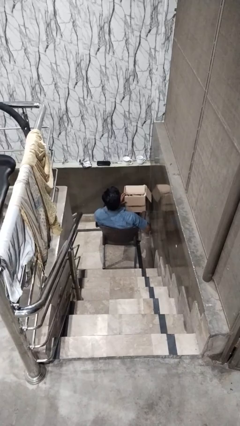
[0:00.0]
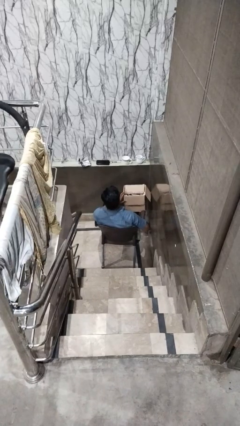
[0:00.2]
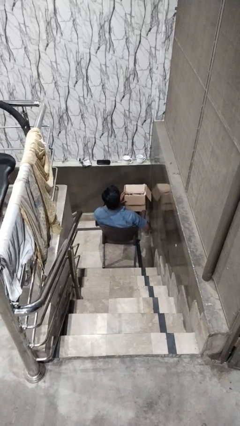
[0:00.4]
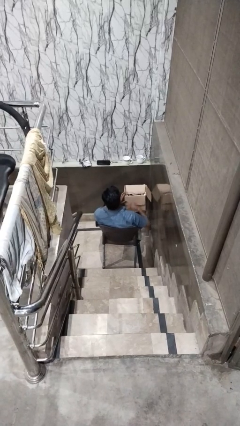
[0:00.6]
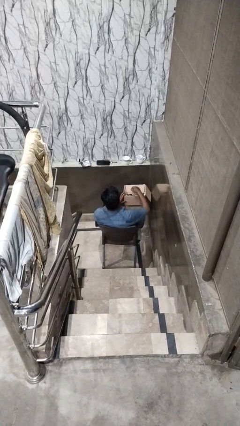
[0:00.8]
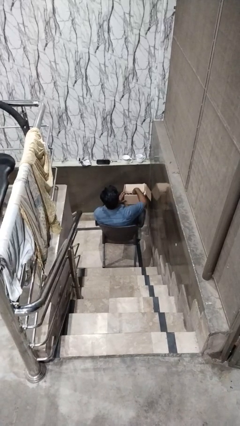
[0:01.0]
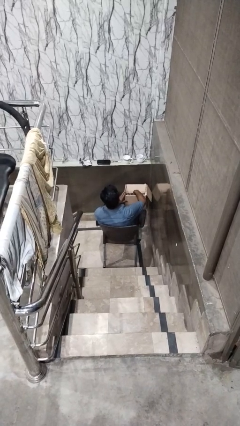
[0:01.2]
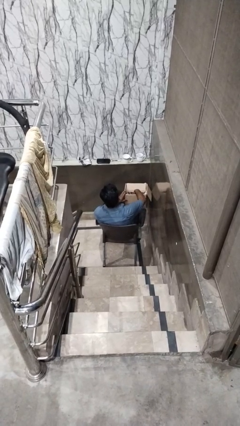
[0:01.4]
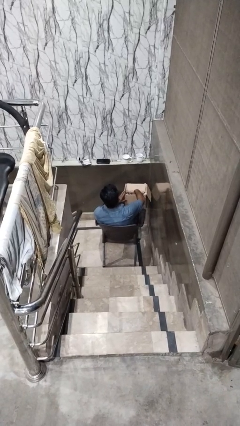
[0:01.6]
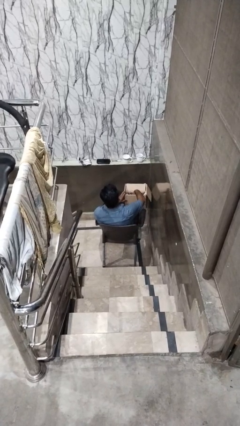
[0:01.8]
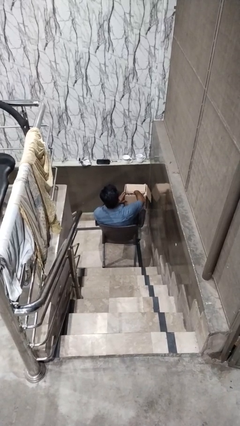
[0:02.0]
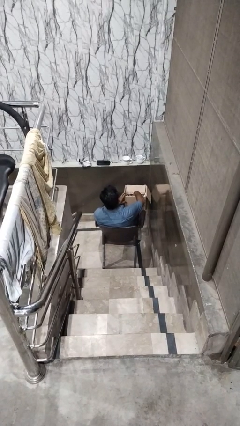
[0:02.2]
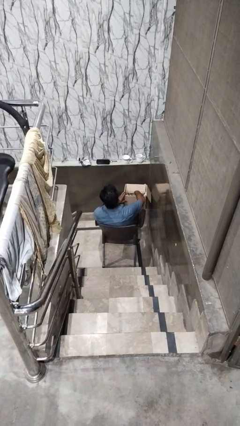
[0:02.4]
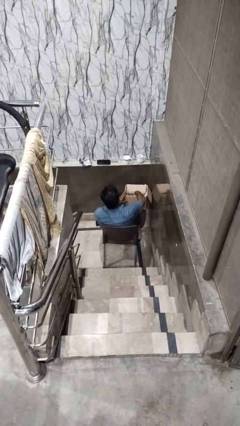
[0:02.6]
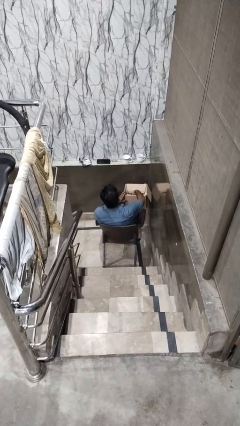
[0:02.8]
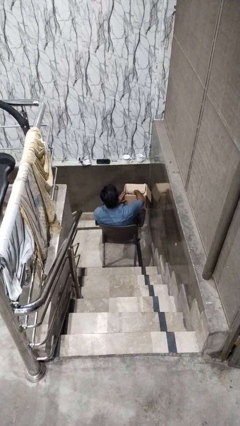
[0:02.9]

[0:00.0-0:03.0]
person searches in box

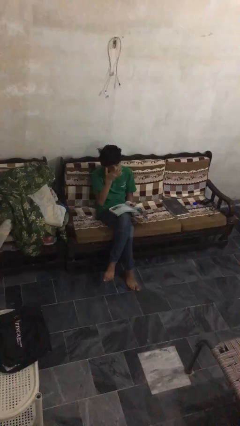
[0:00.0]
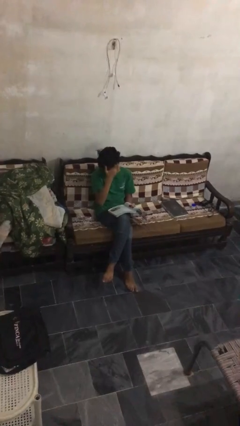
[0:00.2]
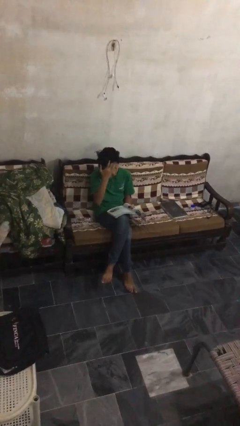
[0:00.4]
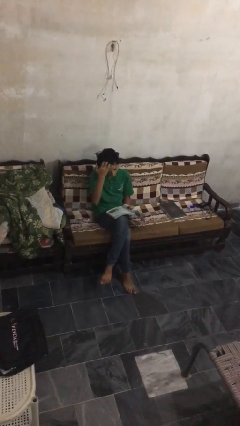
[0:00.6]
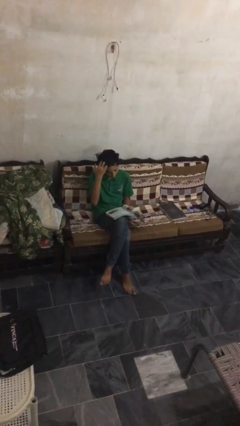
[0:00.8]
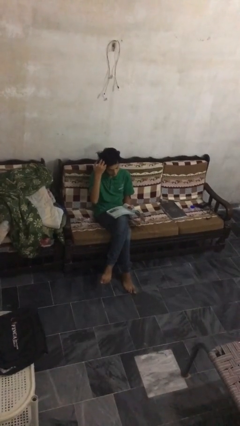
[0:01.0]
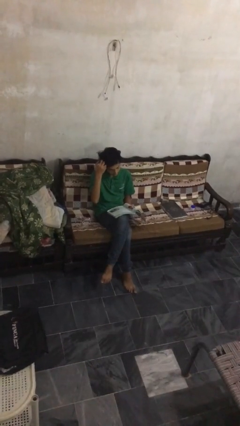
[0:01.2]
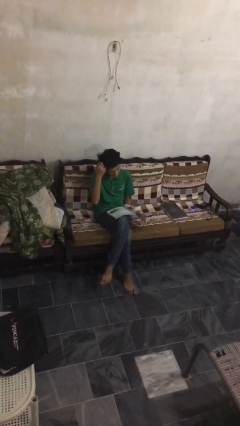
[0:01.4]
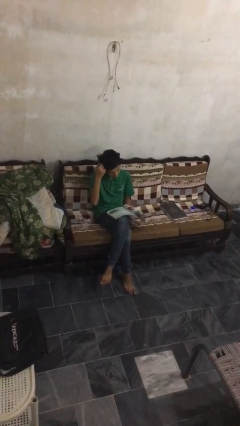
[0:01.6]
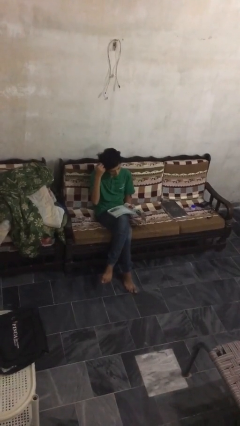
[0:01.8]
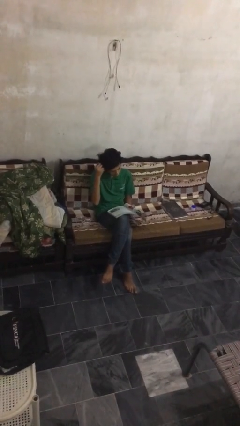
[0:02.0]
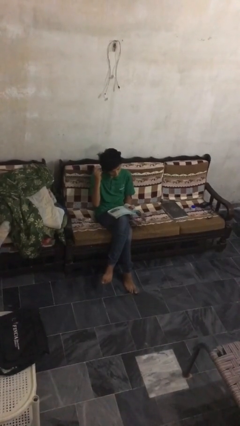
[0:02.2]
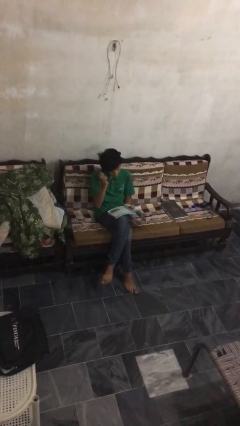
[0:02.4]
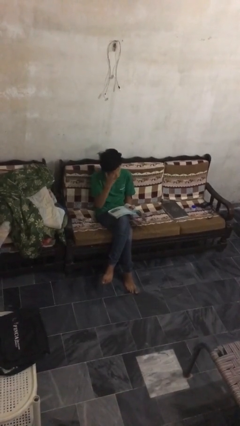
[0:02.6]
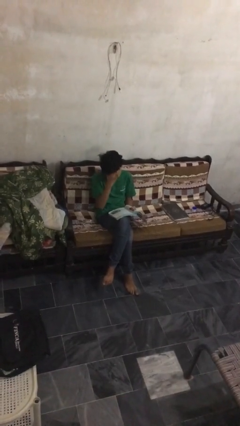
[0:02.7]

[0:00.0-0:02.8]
person reads document

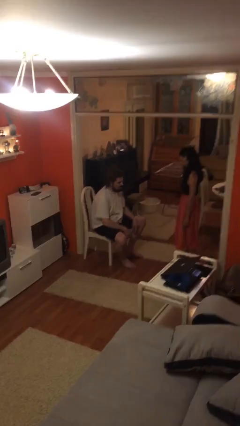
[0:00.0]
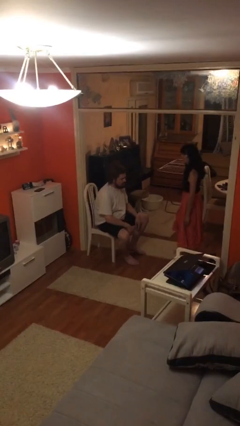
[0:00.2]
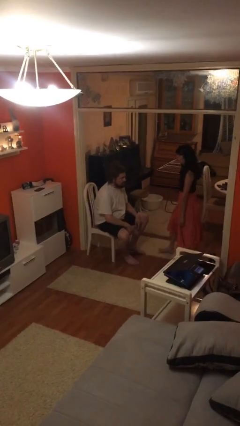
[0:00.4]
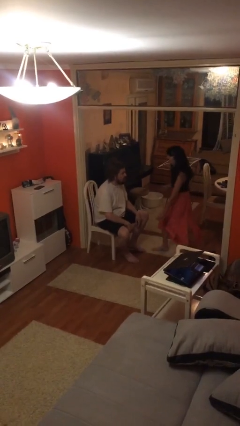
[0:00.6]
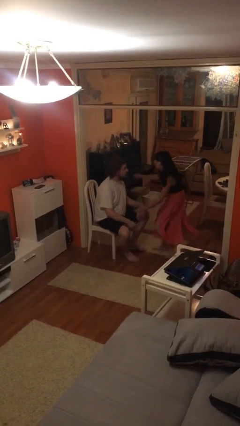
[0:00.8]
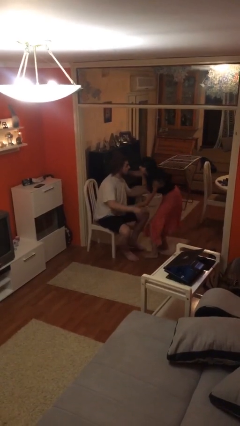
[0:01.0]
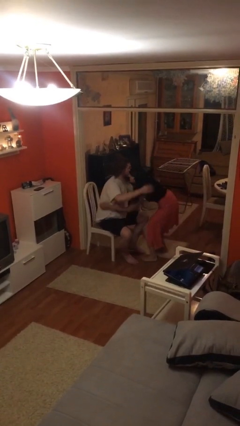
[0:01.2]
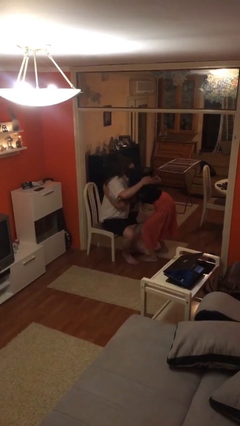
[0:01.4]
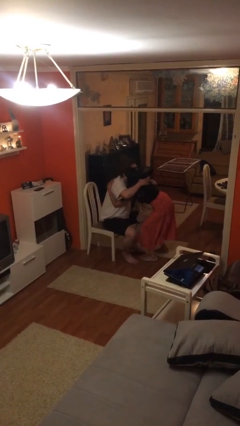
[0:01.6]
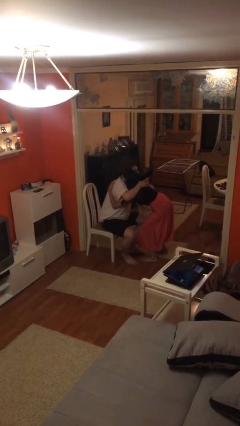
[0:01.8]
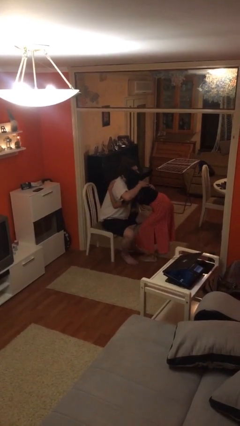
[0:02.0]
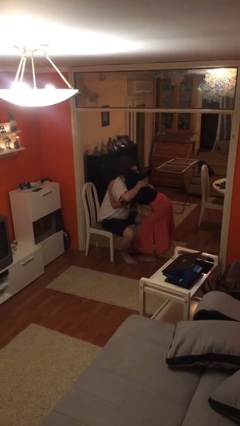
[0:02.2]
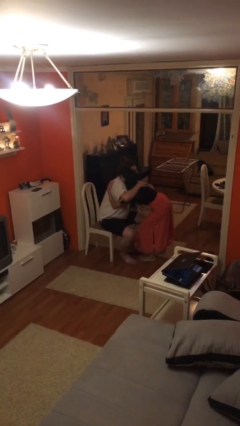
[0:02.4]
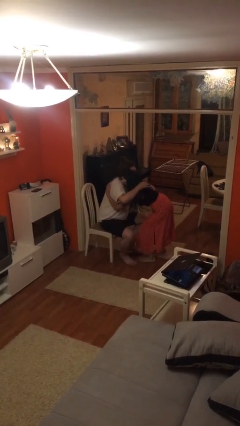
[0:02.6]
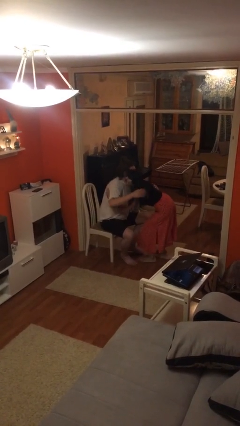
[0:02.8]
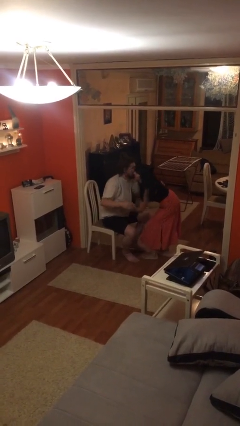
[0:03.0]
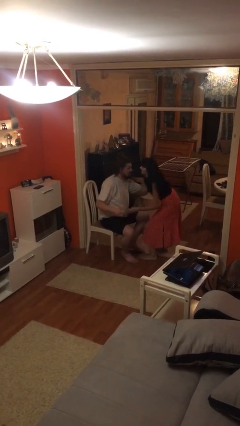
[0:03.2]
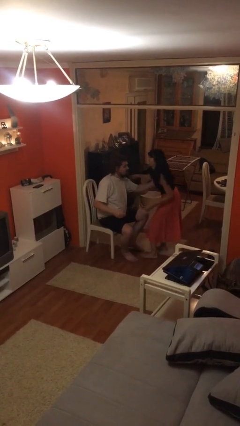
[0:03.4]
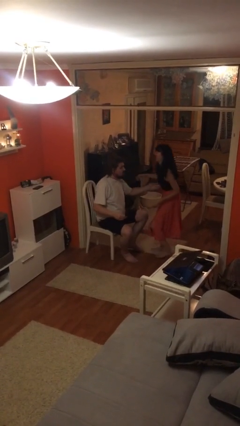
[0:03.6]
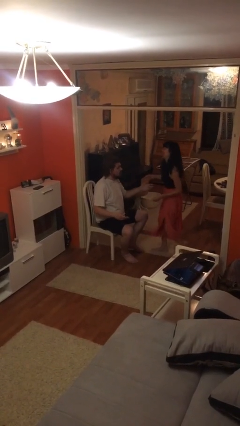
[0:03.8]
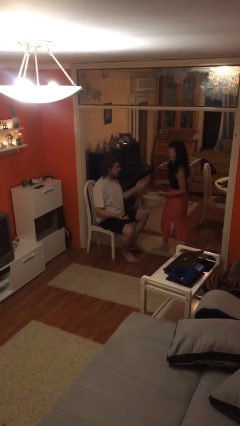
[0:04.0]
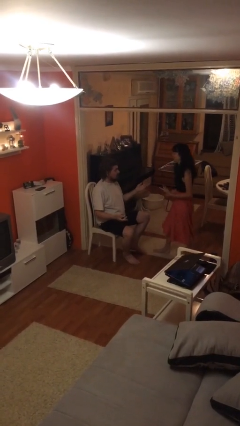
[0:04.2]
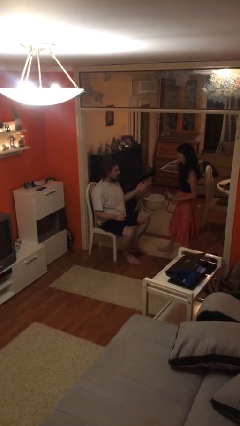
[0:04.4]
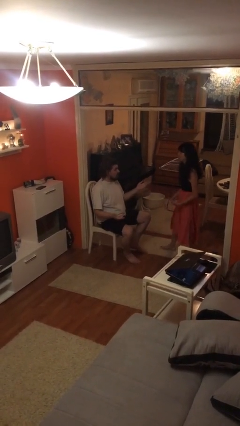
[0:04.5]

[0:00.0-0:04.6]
person embraces person

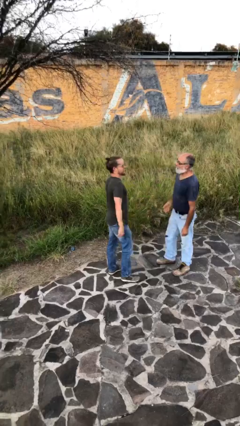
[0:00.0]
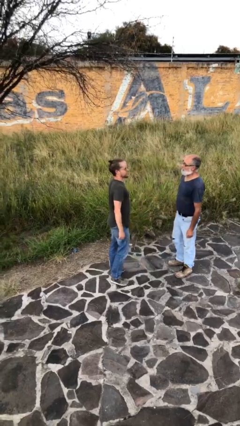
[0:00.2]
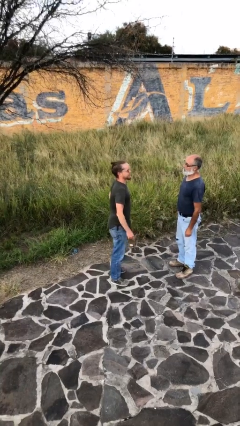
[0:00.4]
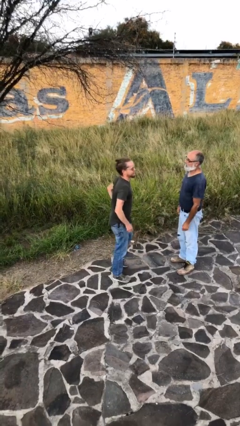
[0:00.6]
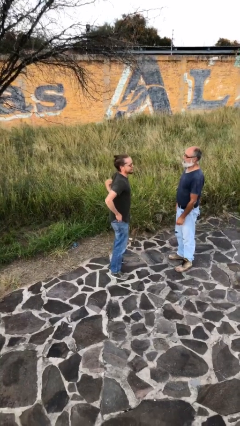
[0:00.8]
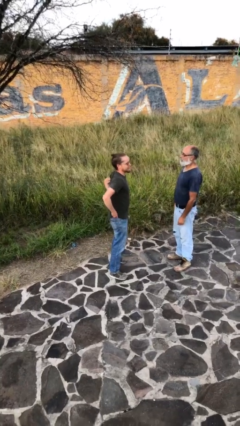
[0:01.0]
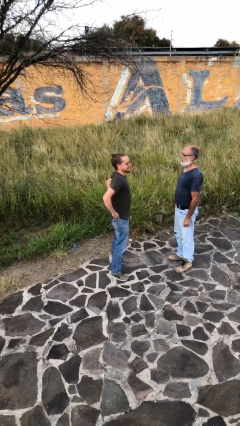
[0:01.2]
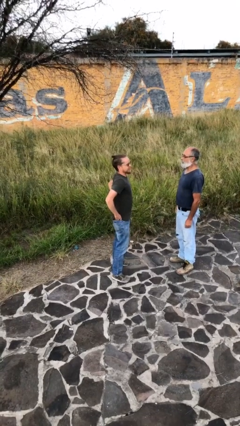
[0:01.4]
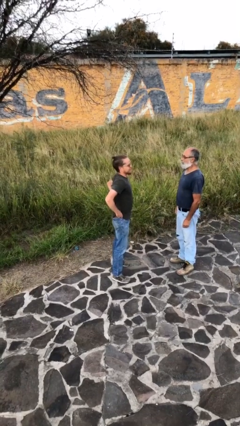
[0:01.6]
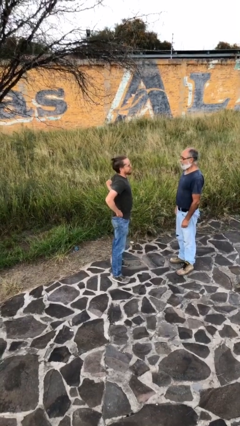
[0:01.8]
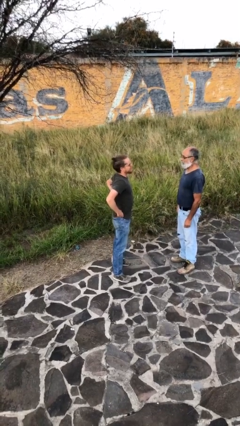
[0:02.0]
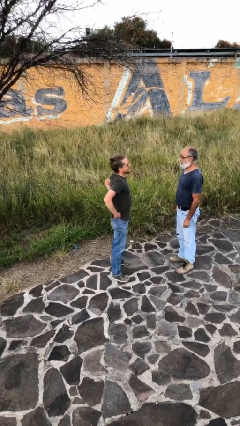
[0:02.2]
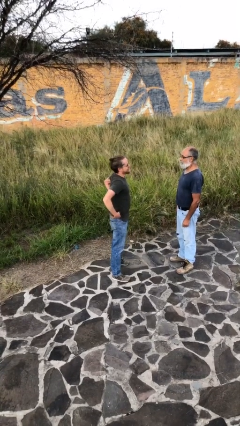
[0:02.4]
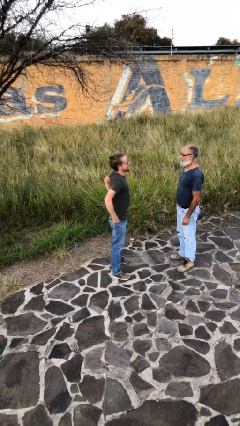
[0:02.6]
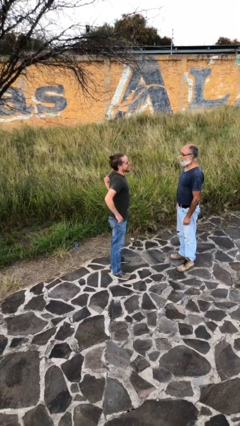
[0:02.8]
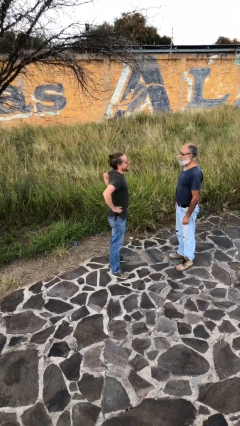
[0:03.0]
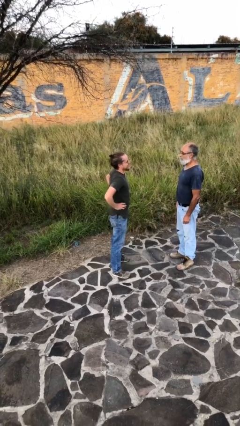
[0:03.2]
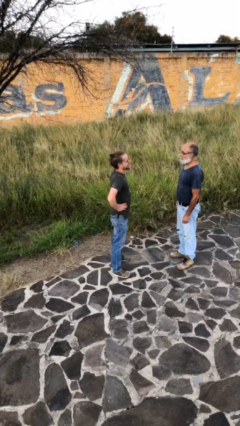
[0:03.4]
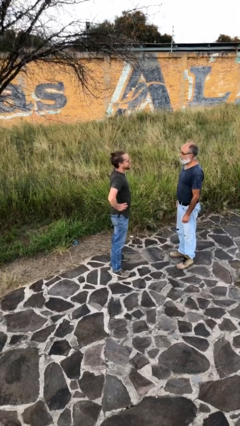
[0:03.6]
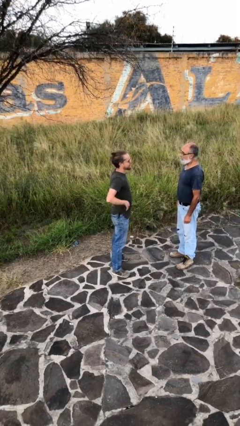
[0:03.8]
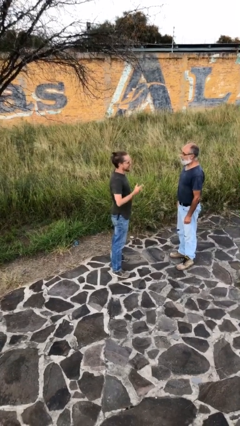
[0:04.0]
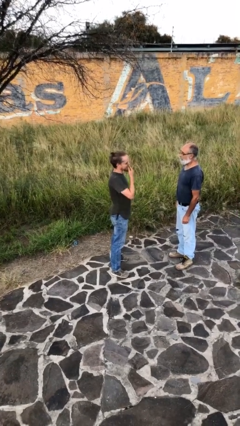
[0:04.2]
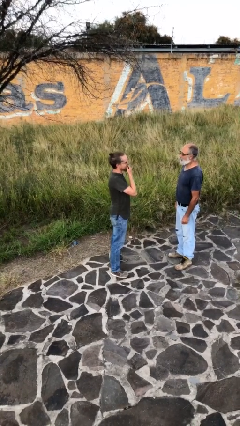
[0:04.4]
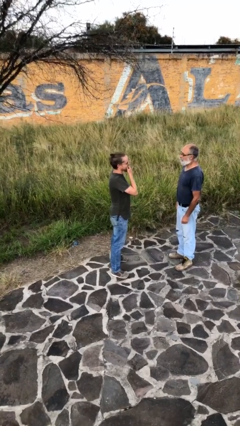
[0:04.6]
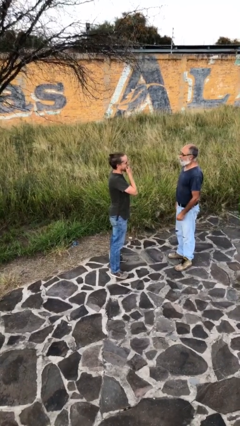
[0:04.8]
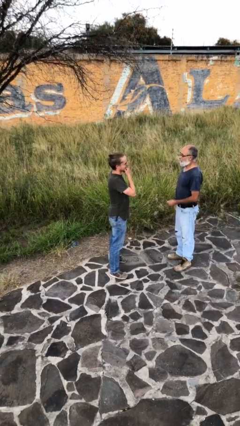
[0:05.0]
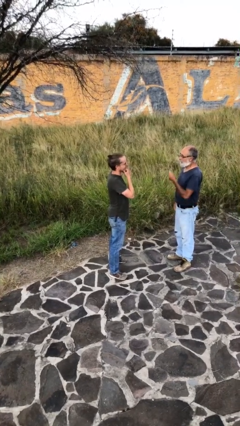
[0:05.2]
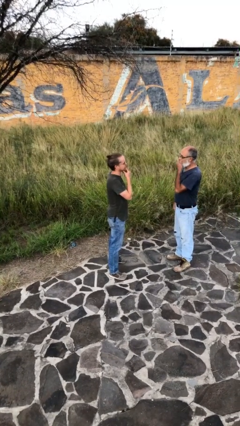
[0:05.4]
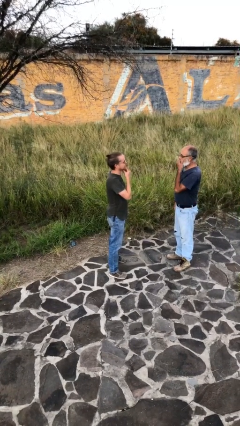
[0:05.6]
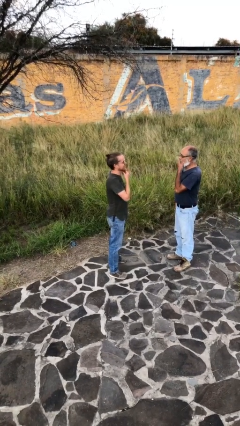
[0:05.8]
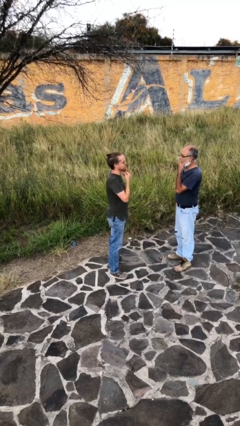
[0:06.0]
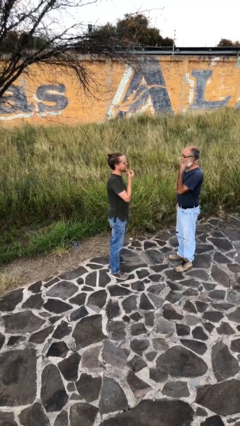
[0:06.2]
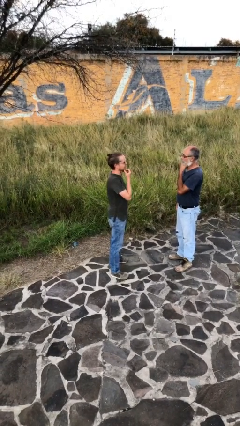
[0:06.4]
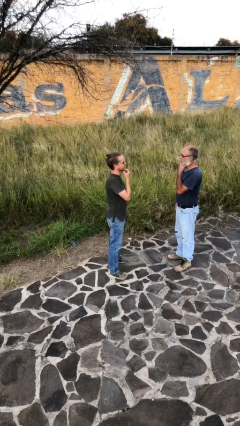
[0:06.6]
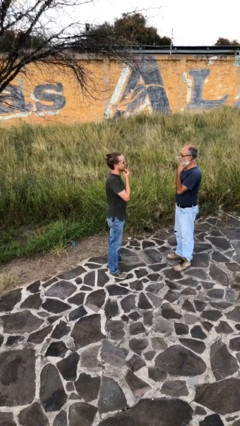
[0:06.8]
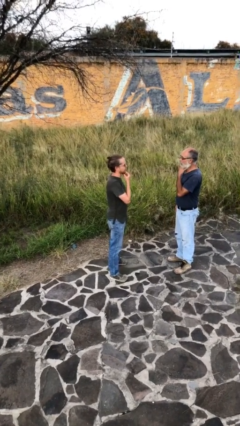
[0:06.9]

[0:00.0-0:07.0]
person talks to person

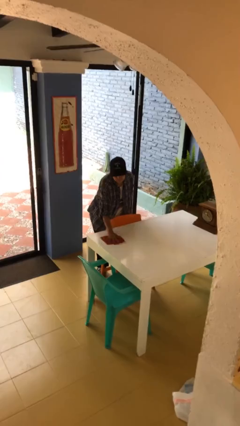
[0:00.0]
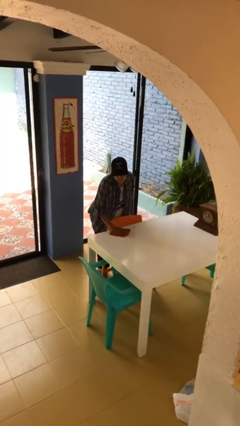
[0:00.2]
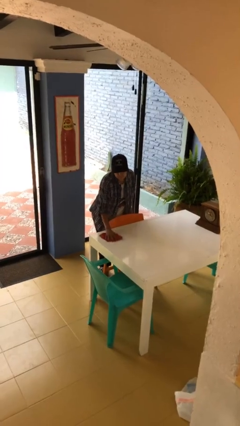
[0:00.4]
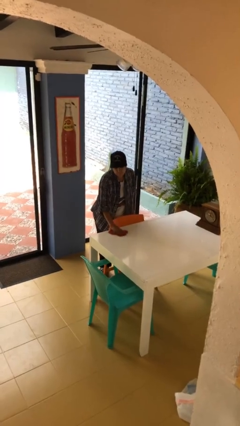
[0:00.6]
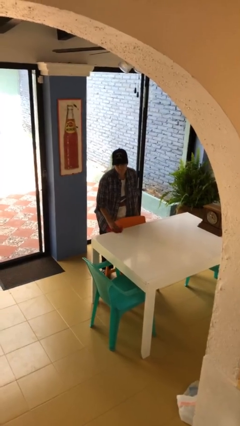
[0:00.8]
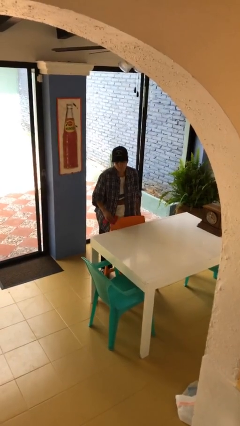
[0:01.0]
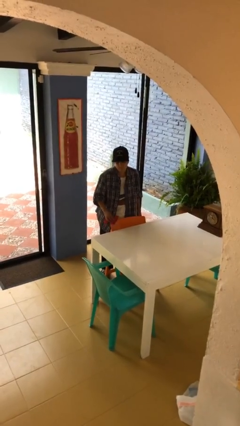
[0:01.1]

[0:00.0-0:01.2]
person cleans table with rag
